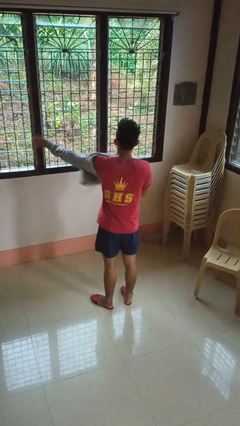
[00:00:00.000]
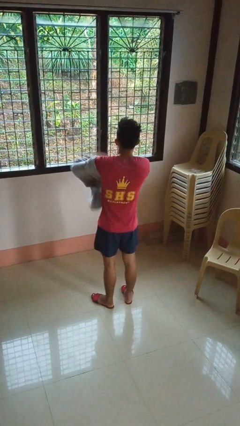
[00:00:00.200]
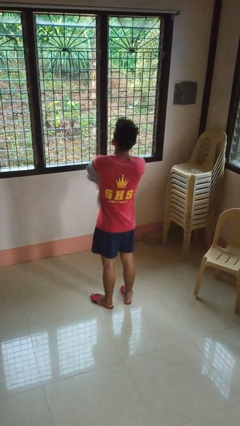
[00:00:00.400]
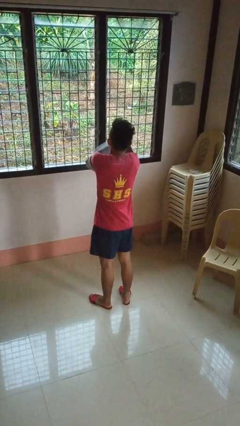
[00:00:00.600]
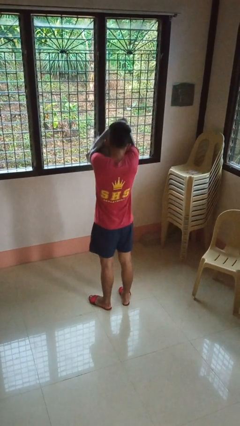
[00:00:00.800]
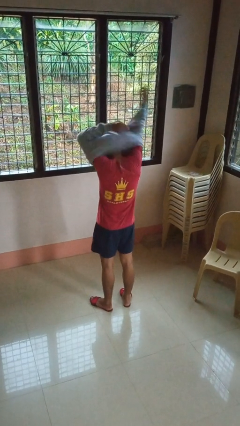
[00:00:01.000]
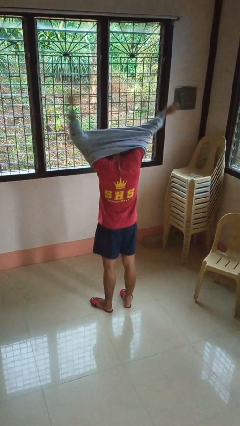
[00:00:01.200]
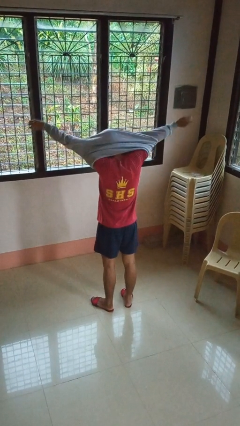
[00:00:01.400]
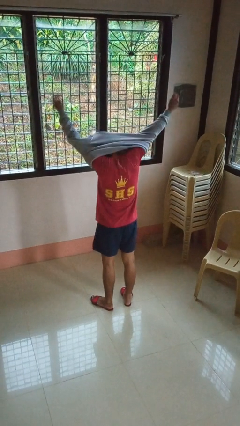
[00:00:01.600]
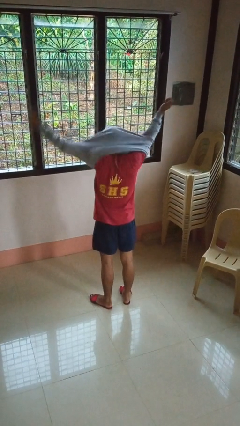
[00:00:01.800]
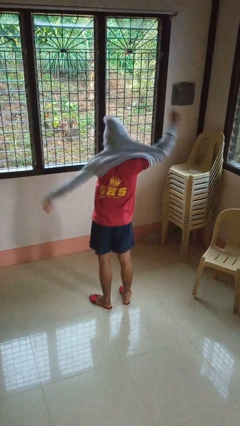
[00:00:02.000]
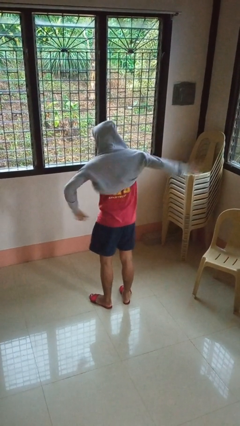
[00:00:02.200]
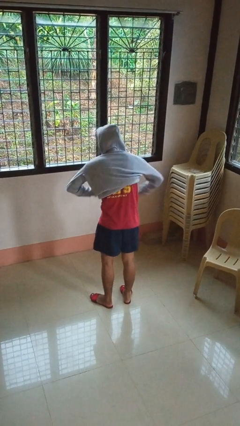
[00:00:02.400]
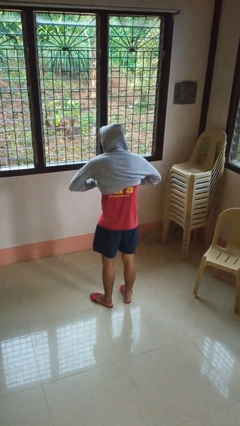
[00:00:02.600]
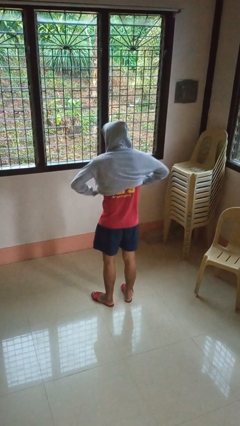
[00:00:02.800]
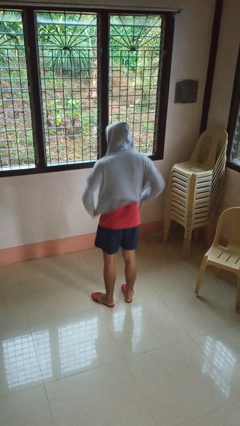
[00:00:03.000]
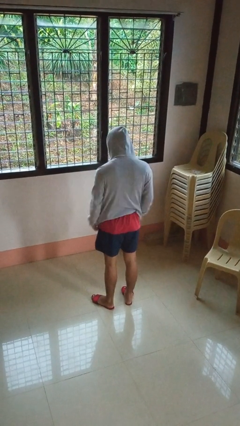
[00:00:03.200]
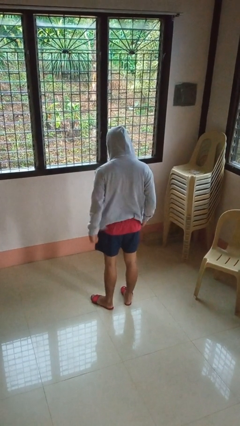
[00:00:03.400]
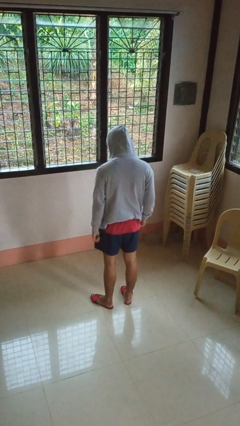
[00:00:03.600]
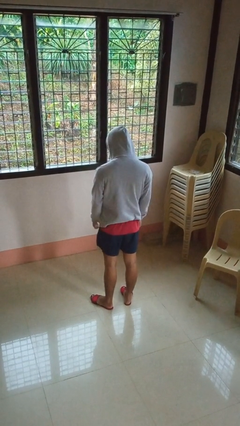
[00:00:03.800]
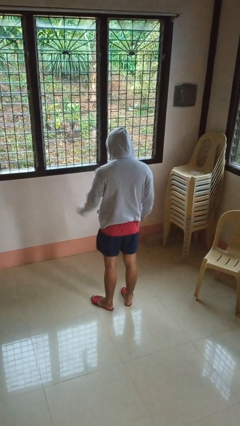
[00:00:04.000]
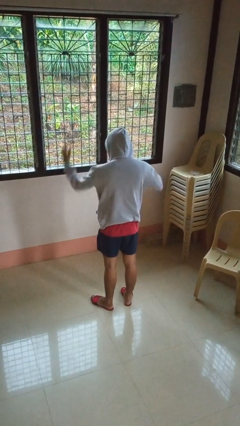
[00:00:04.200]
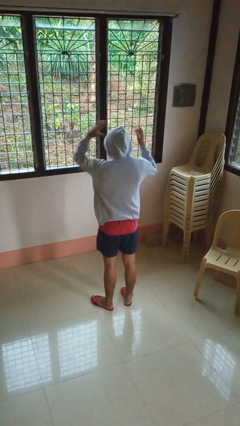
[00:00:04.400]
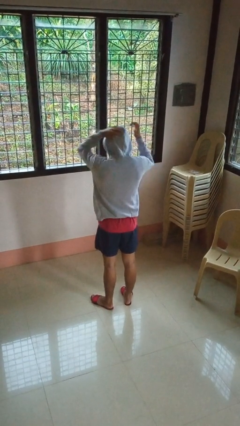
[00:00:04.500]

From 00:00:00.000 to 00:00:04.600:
person puts on hoodie

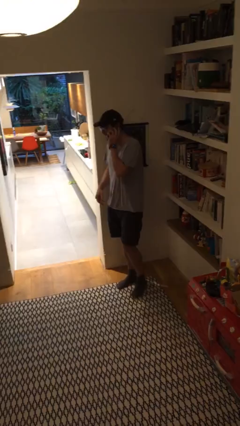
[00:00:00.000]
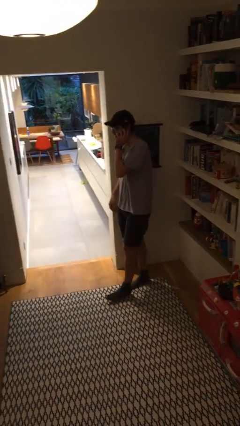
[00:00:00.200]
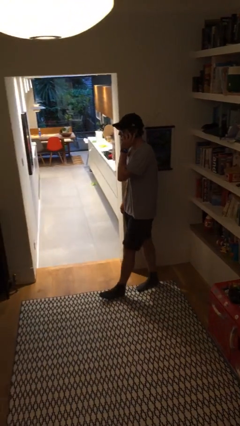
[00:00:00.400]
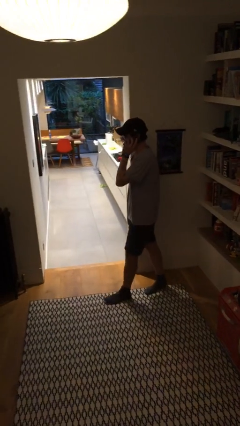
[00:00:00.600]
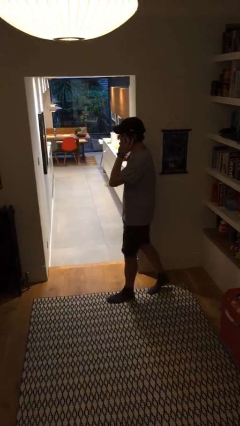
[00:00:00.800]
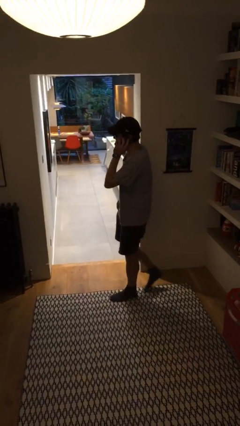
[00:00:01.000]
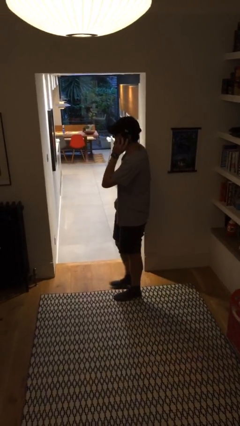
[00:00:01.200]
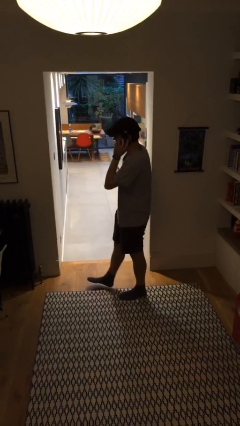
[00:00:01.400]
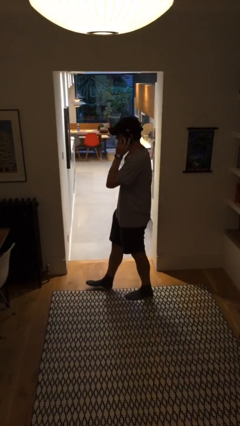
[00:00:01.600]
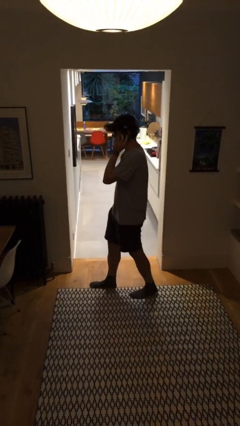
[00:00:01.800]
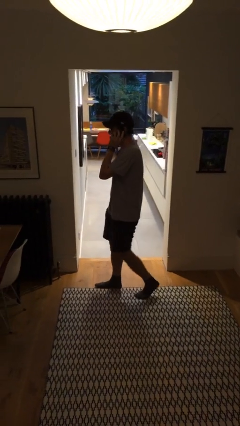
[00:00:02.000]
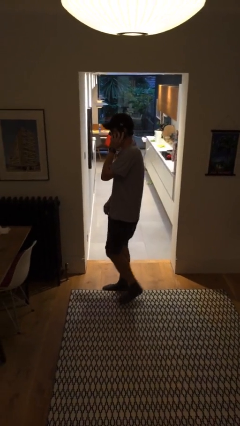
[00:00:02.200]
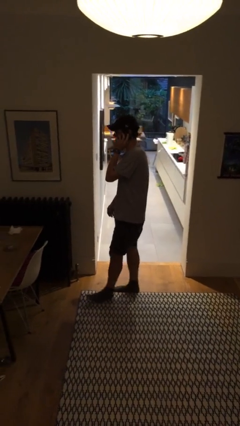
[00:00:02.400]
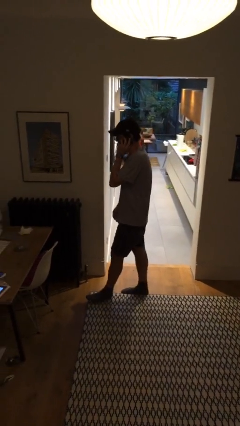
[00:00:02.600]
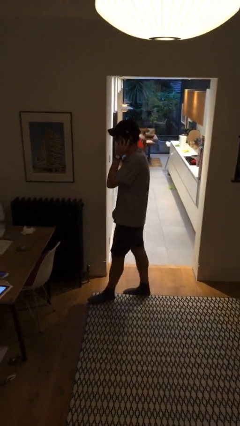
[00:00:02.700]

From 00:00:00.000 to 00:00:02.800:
person talks on phone

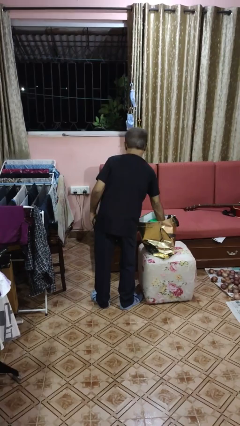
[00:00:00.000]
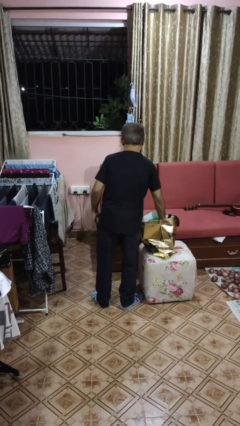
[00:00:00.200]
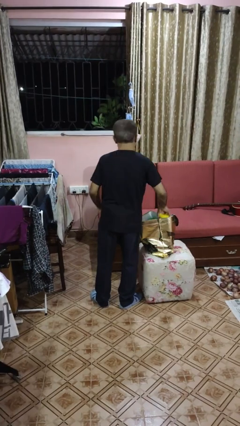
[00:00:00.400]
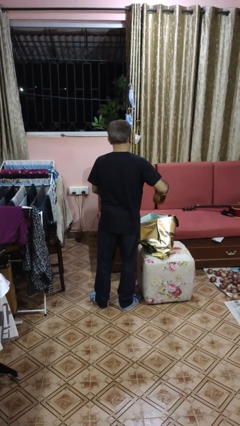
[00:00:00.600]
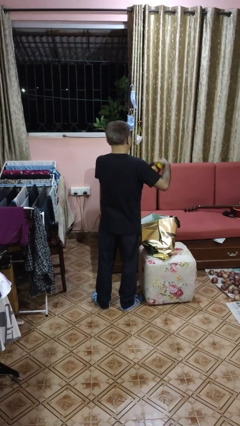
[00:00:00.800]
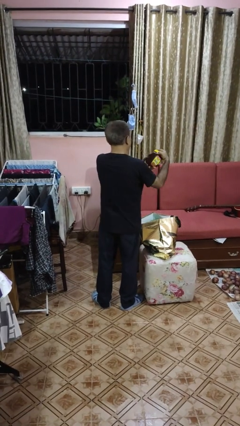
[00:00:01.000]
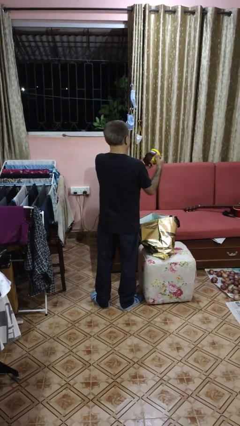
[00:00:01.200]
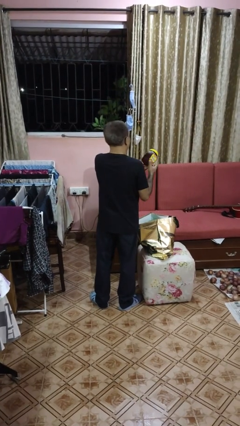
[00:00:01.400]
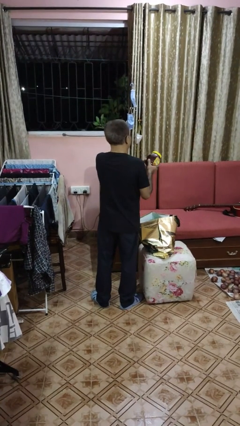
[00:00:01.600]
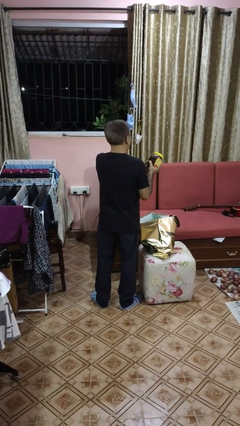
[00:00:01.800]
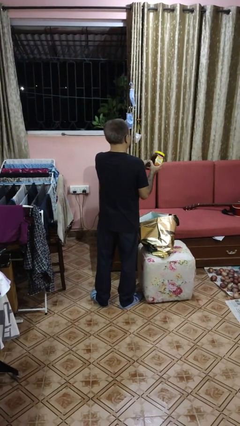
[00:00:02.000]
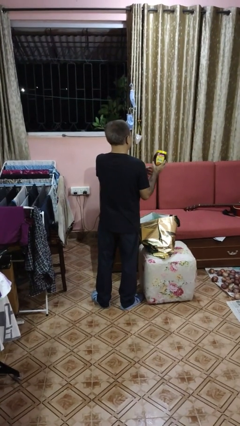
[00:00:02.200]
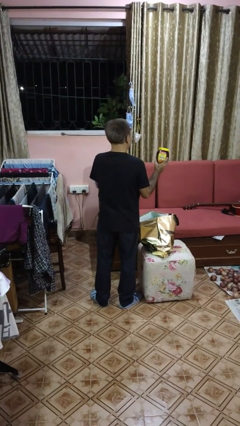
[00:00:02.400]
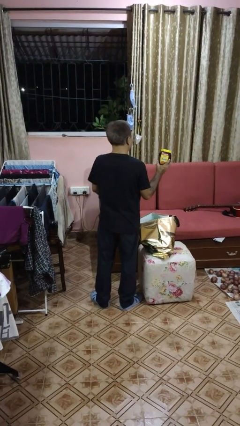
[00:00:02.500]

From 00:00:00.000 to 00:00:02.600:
person takes object from bag

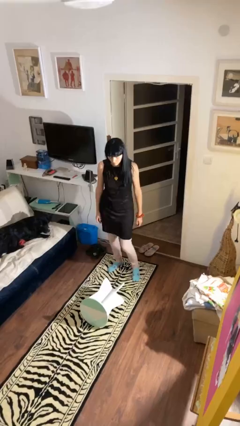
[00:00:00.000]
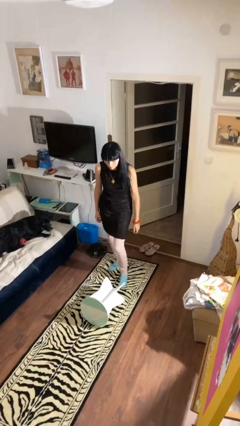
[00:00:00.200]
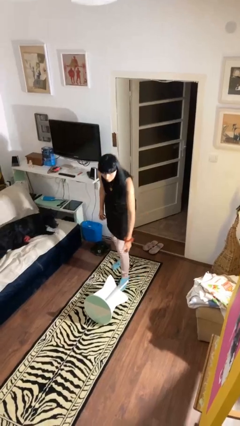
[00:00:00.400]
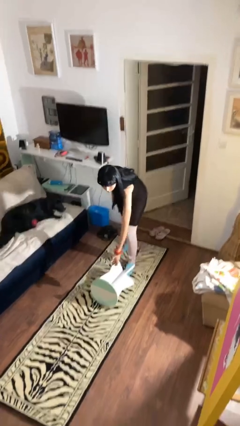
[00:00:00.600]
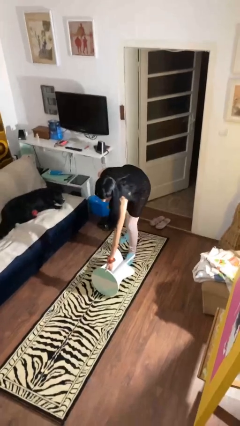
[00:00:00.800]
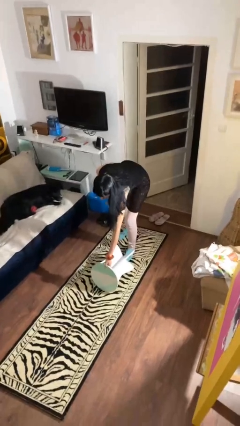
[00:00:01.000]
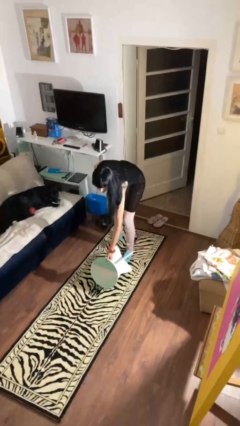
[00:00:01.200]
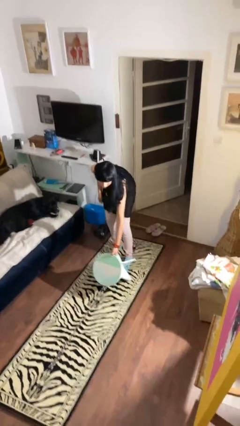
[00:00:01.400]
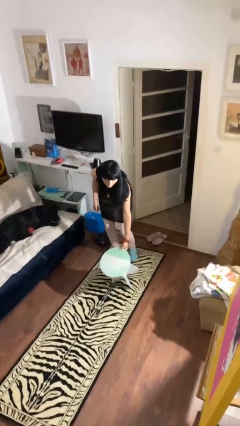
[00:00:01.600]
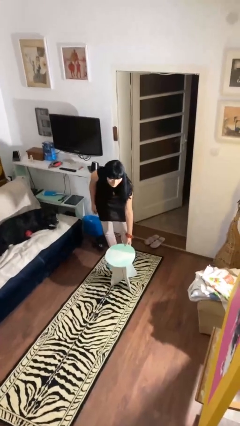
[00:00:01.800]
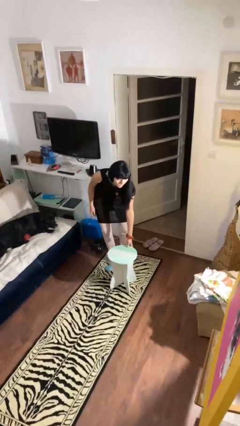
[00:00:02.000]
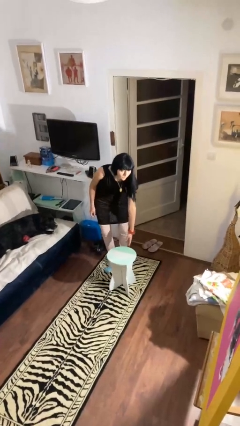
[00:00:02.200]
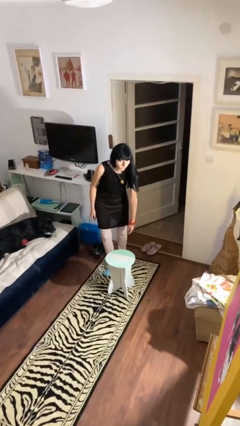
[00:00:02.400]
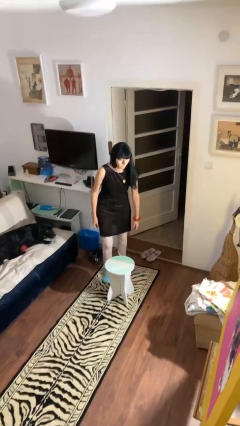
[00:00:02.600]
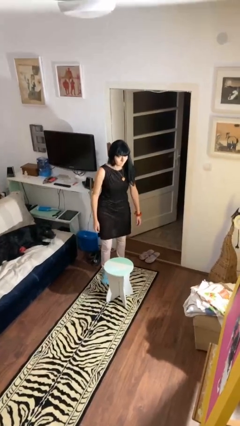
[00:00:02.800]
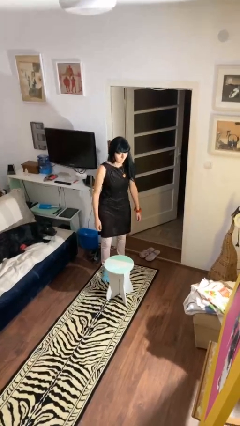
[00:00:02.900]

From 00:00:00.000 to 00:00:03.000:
person sets upright furniture

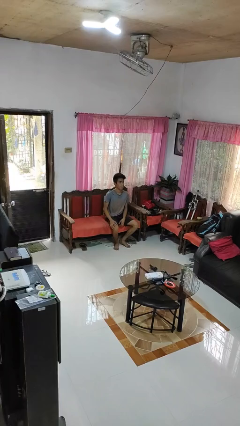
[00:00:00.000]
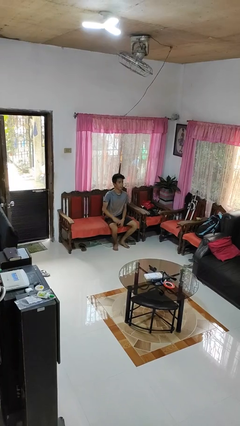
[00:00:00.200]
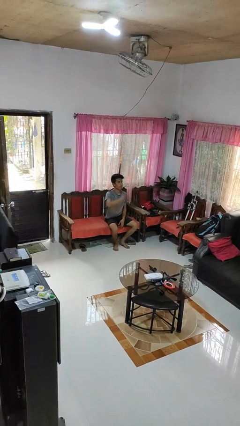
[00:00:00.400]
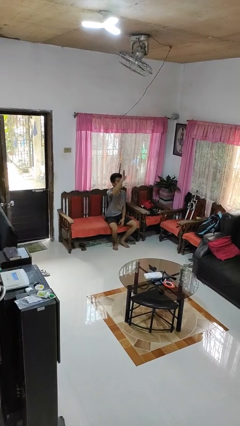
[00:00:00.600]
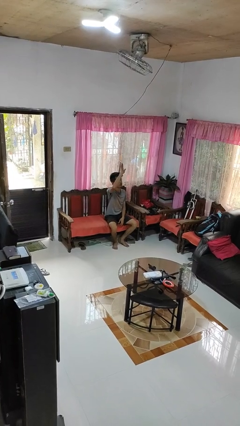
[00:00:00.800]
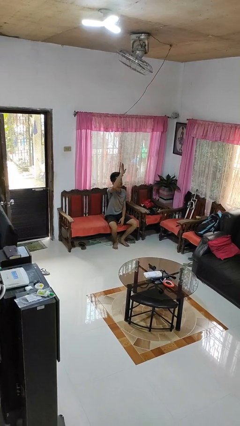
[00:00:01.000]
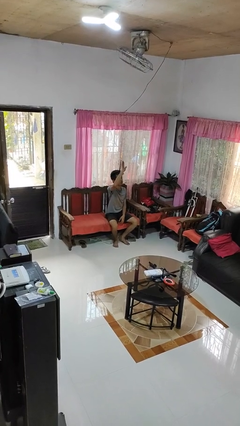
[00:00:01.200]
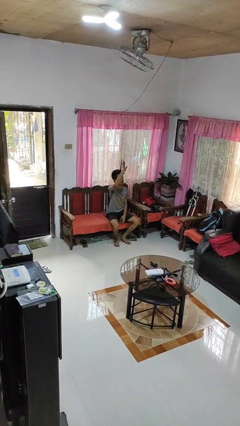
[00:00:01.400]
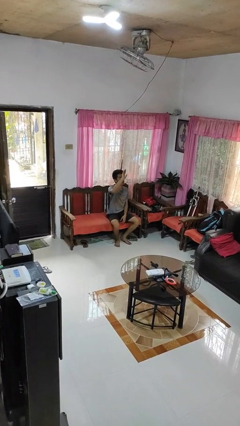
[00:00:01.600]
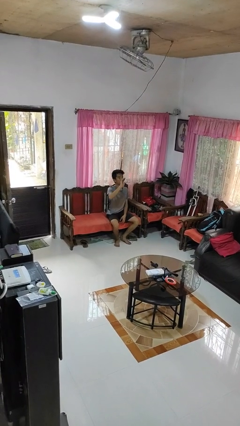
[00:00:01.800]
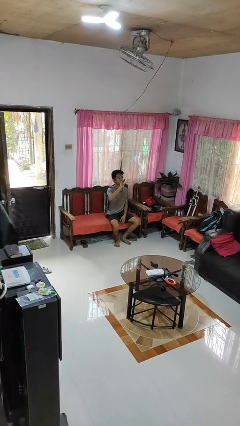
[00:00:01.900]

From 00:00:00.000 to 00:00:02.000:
person gestures raise hand

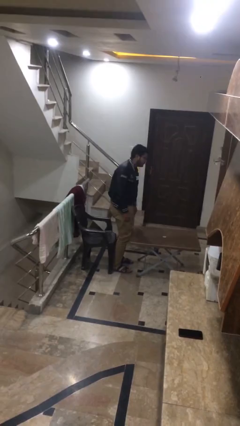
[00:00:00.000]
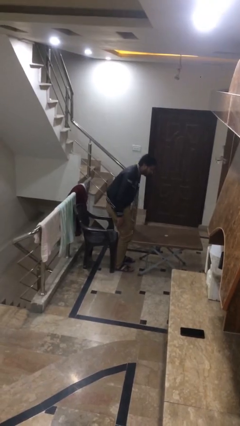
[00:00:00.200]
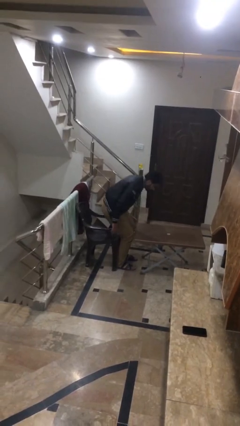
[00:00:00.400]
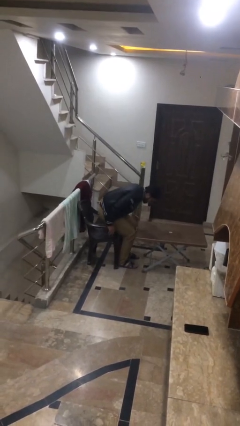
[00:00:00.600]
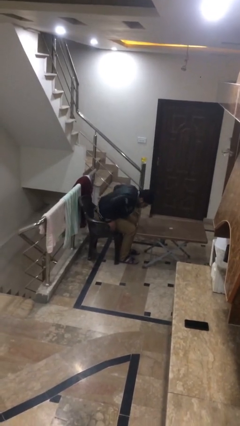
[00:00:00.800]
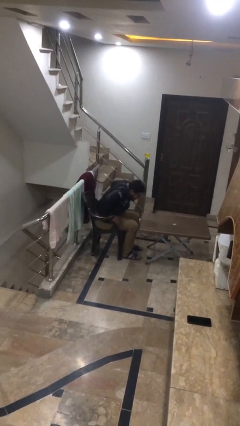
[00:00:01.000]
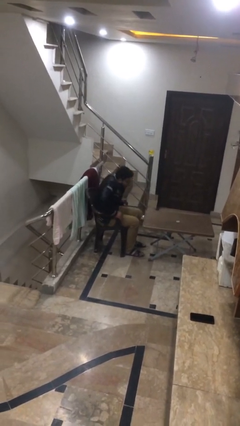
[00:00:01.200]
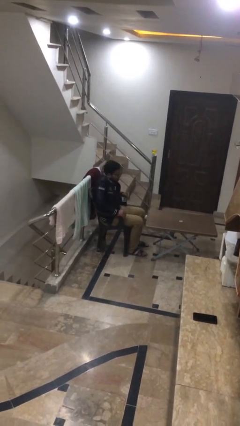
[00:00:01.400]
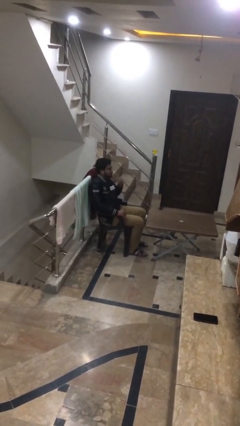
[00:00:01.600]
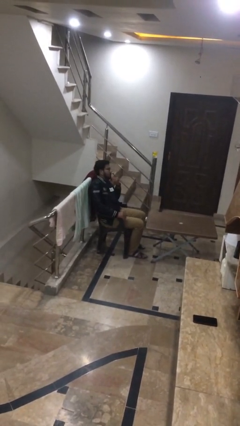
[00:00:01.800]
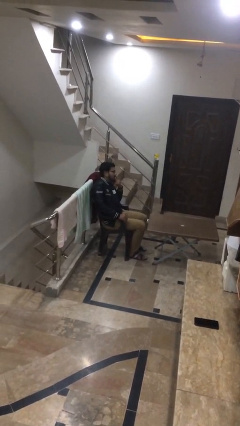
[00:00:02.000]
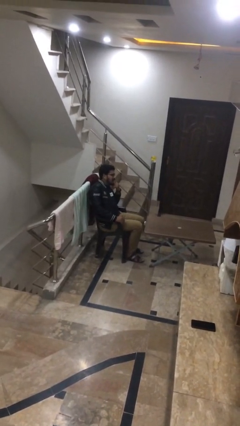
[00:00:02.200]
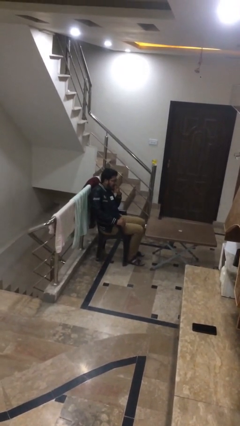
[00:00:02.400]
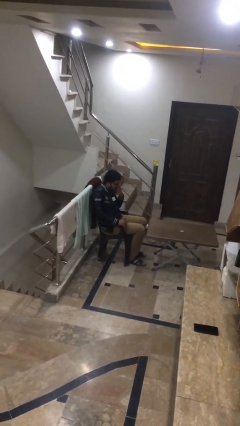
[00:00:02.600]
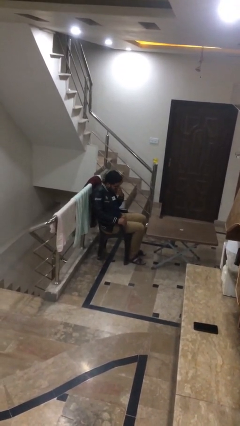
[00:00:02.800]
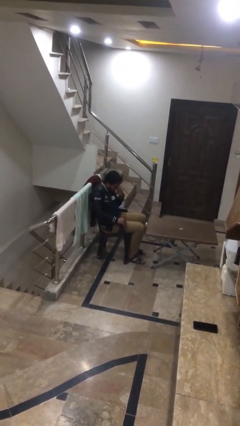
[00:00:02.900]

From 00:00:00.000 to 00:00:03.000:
person sits down
